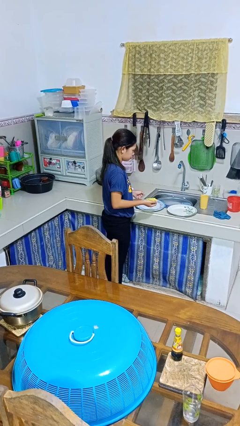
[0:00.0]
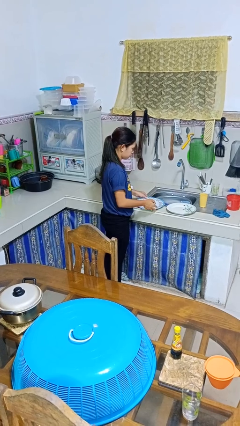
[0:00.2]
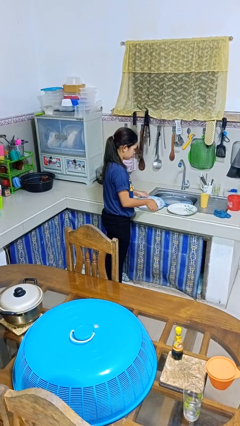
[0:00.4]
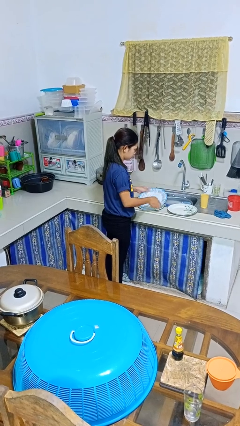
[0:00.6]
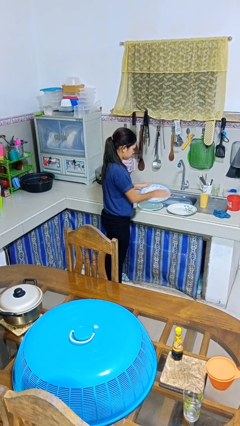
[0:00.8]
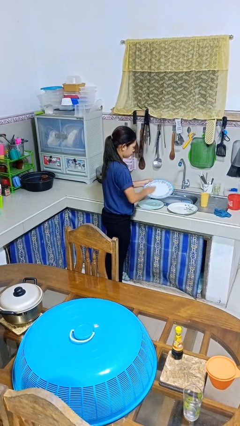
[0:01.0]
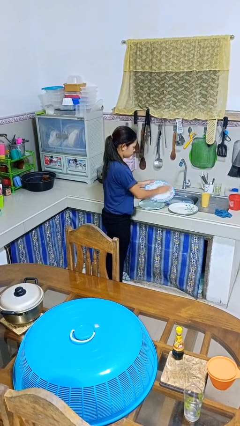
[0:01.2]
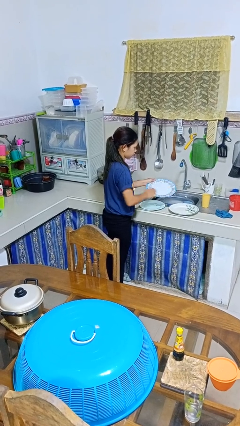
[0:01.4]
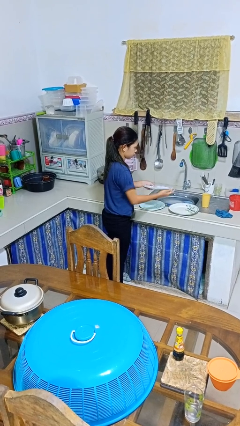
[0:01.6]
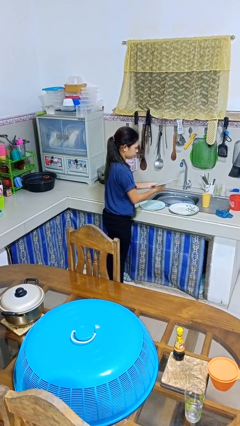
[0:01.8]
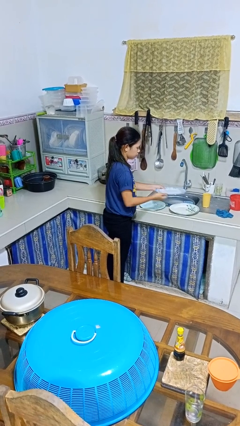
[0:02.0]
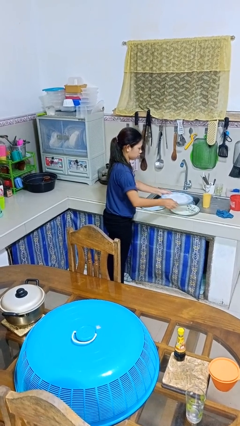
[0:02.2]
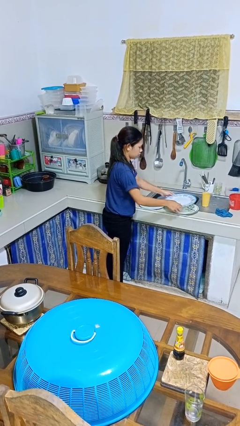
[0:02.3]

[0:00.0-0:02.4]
person washes dish

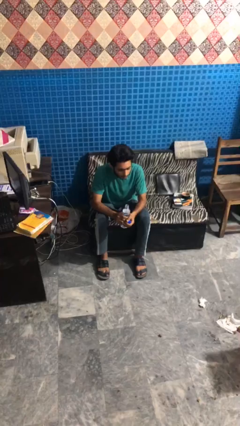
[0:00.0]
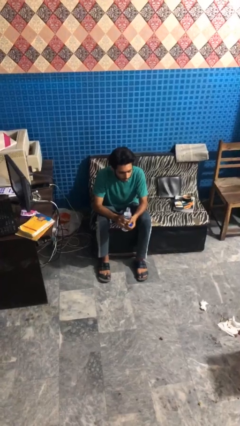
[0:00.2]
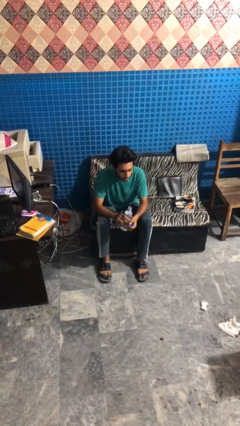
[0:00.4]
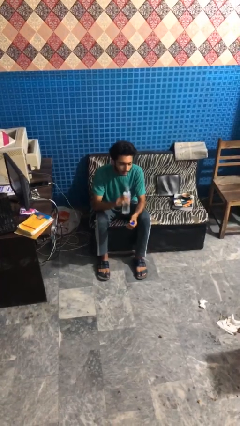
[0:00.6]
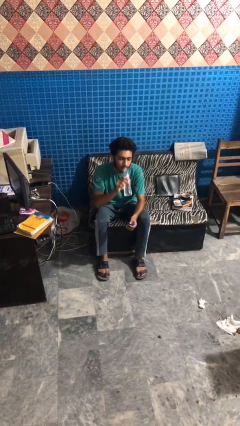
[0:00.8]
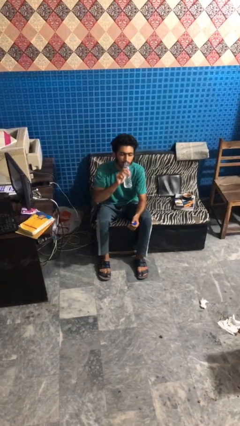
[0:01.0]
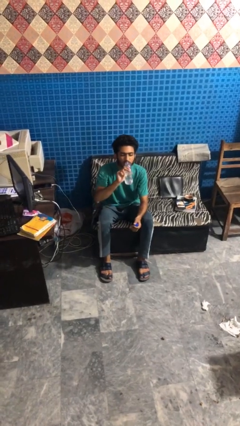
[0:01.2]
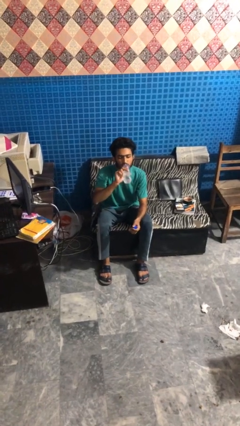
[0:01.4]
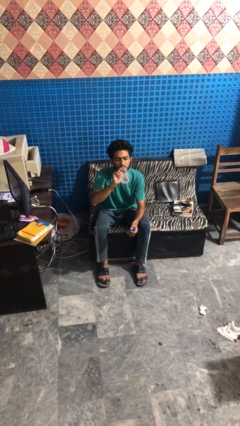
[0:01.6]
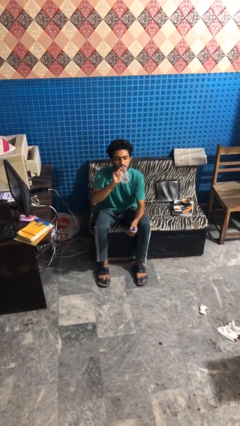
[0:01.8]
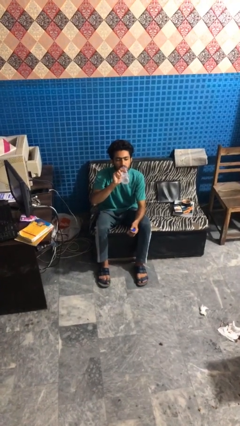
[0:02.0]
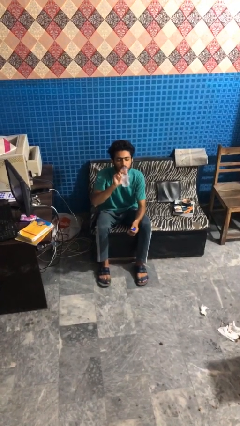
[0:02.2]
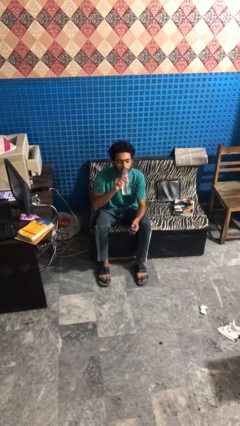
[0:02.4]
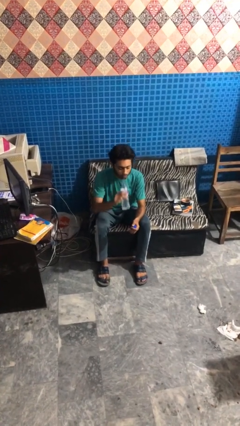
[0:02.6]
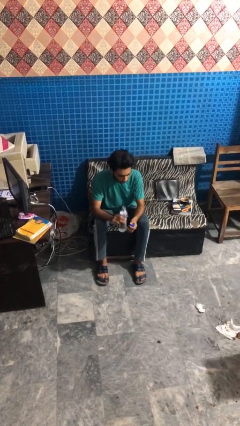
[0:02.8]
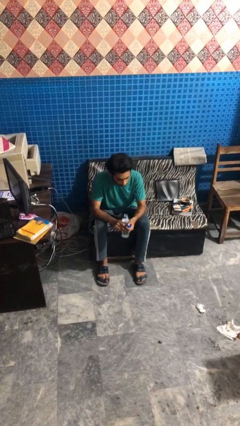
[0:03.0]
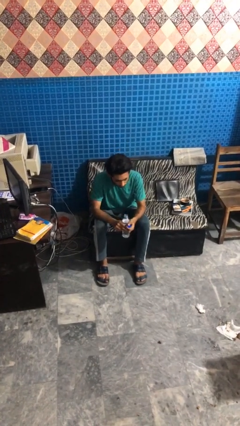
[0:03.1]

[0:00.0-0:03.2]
person drinks from bottle

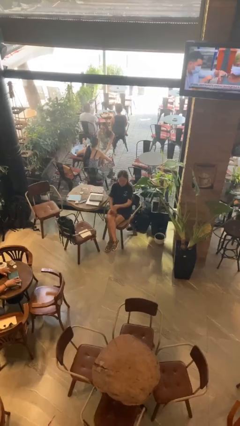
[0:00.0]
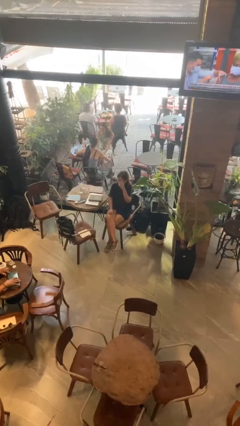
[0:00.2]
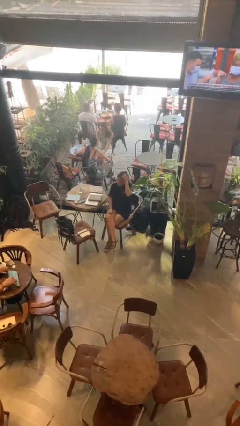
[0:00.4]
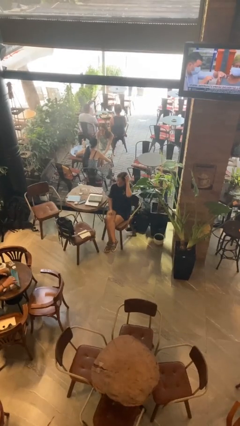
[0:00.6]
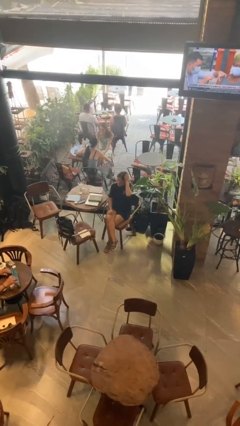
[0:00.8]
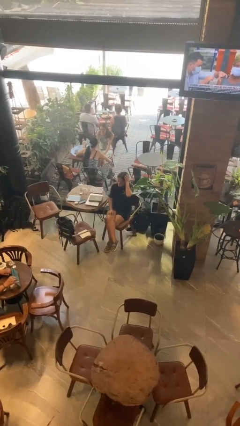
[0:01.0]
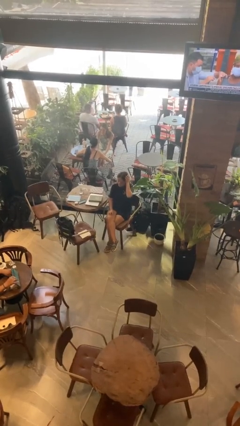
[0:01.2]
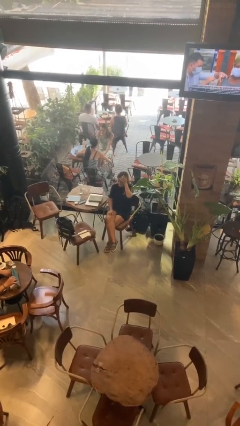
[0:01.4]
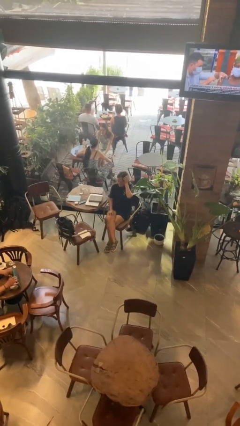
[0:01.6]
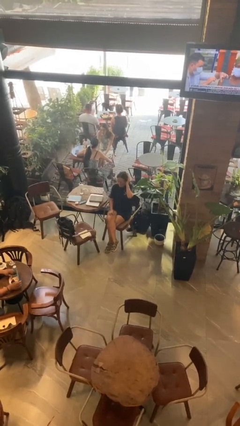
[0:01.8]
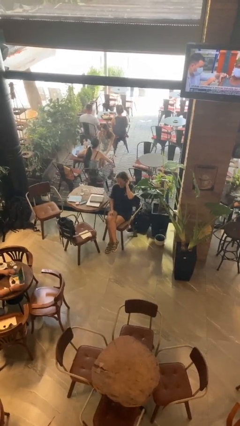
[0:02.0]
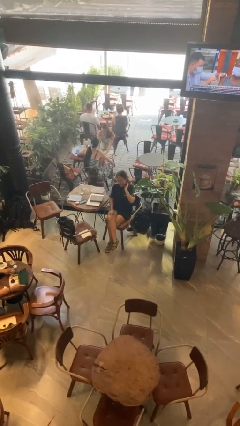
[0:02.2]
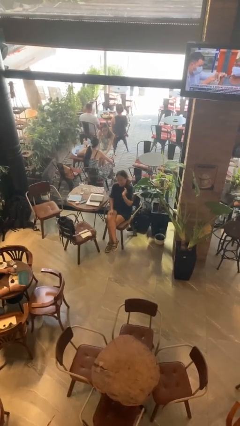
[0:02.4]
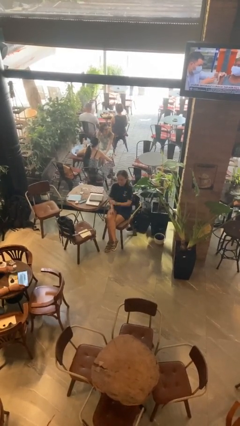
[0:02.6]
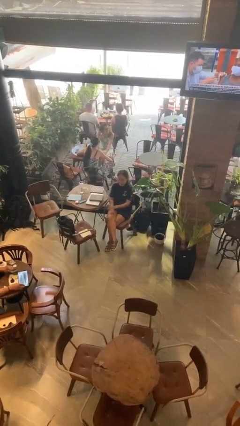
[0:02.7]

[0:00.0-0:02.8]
person scratches face

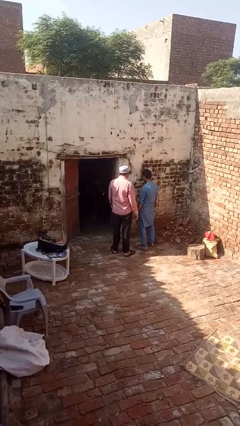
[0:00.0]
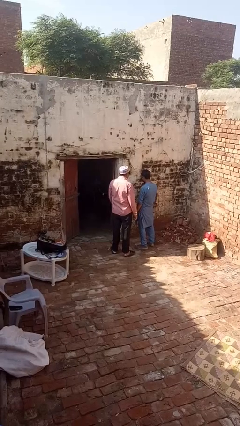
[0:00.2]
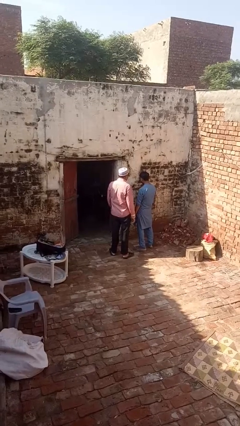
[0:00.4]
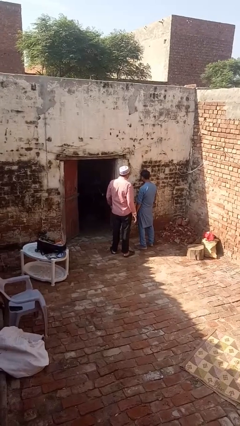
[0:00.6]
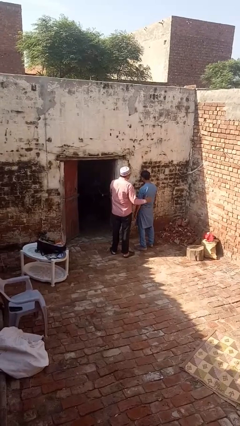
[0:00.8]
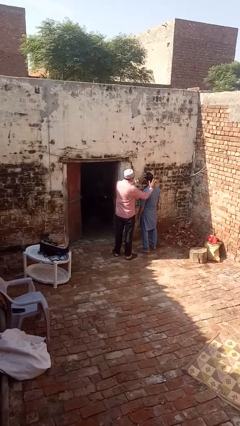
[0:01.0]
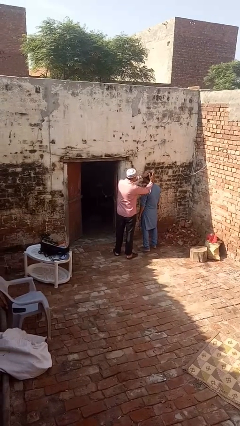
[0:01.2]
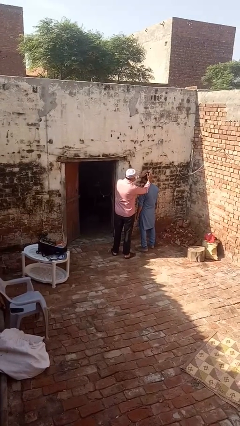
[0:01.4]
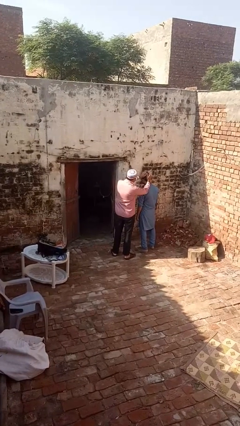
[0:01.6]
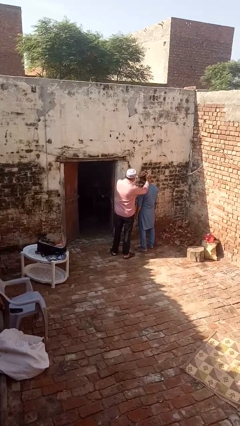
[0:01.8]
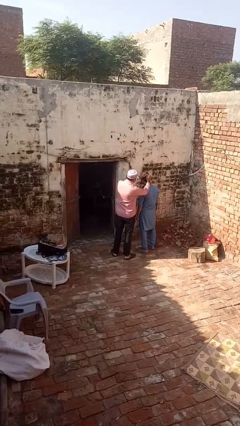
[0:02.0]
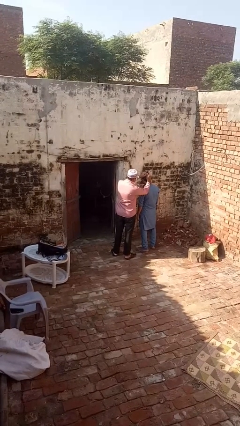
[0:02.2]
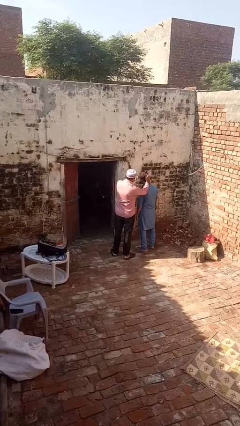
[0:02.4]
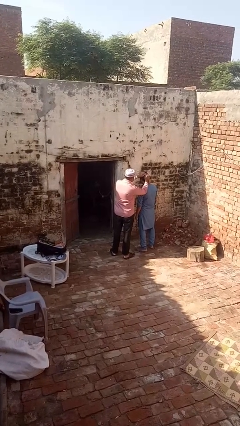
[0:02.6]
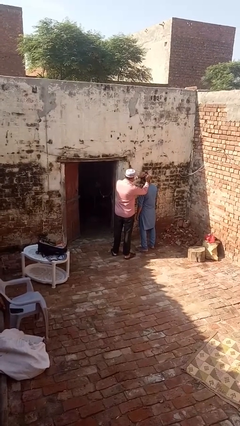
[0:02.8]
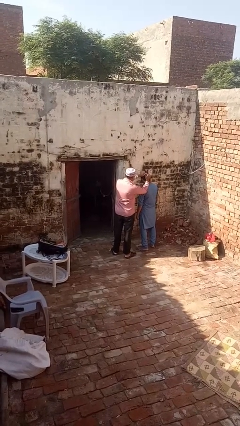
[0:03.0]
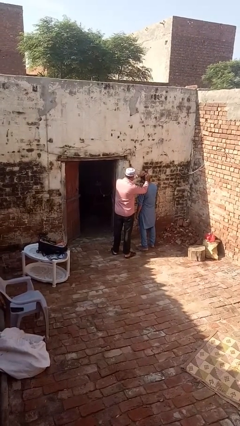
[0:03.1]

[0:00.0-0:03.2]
person grabs person by hair

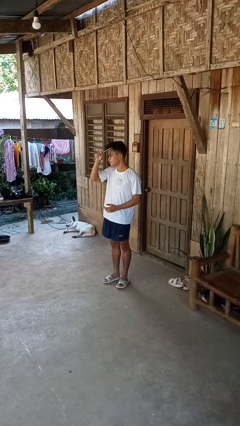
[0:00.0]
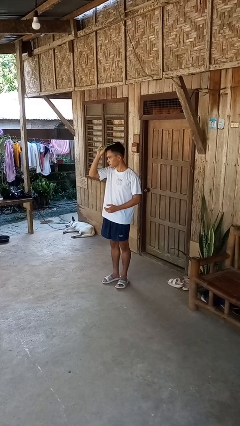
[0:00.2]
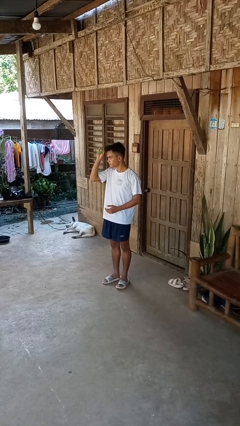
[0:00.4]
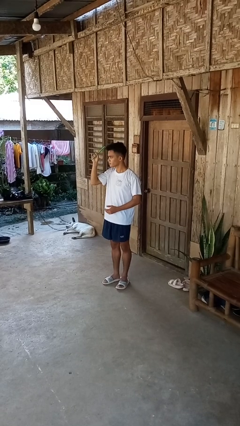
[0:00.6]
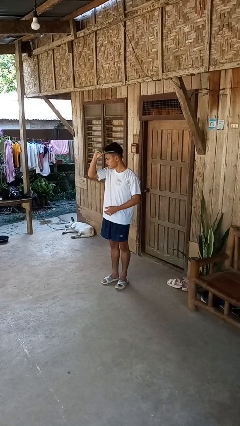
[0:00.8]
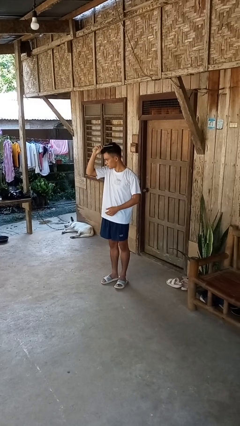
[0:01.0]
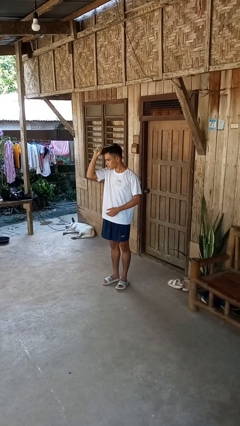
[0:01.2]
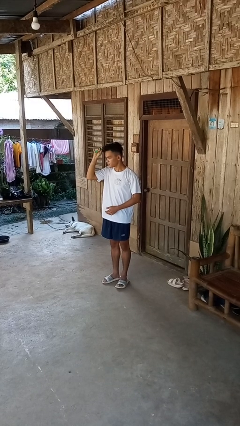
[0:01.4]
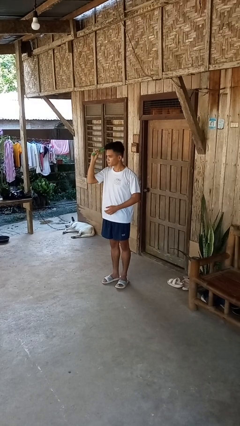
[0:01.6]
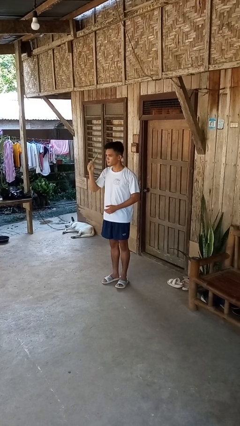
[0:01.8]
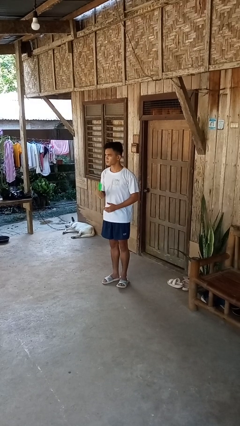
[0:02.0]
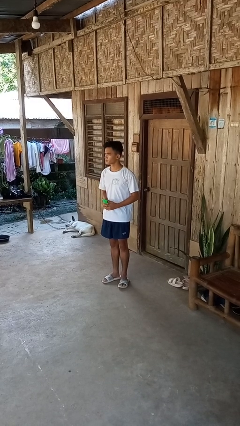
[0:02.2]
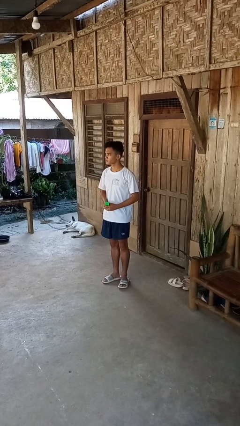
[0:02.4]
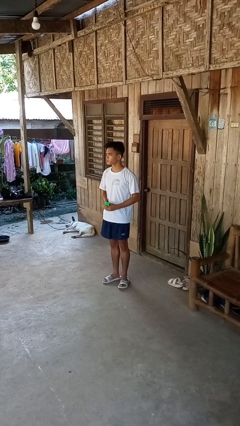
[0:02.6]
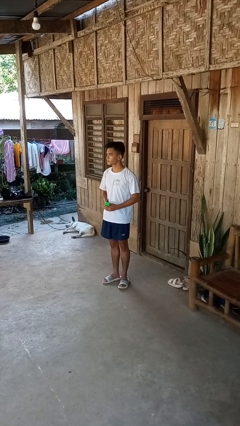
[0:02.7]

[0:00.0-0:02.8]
person brushes hair

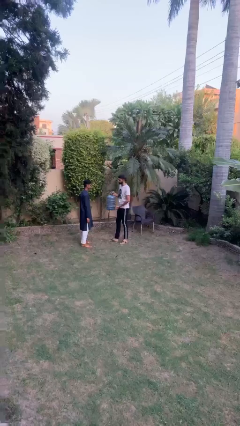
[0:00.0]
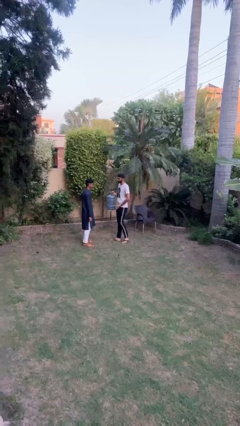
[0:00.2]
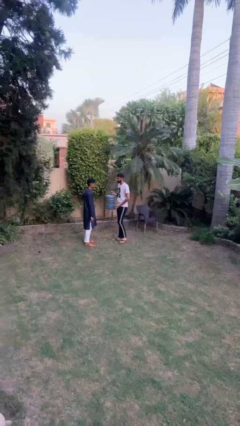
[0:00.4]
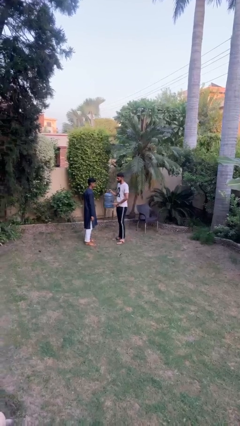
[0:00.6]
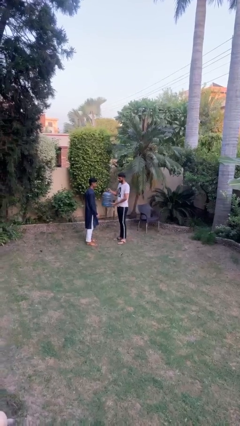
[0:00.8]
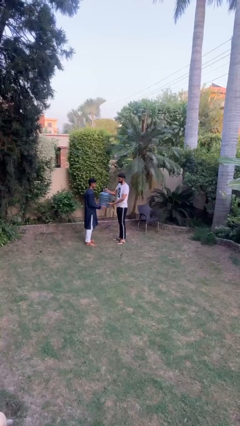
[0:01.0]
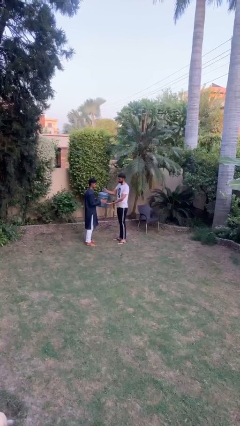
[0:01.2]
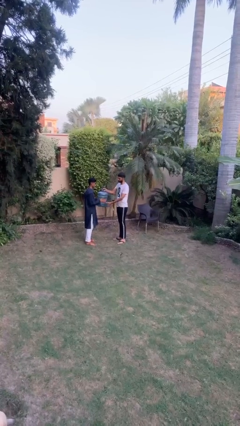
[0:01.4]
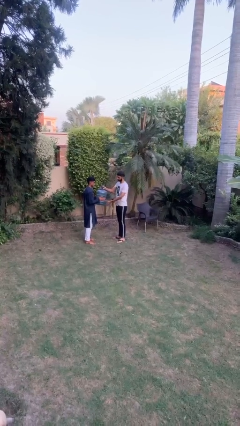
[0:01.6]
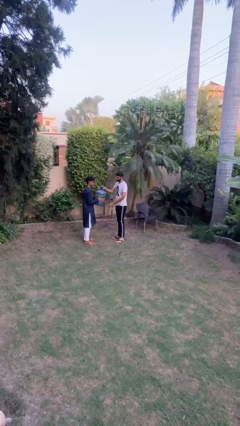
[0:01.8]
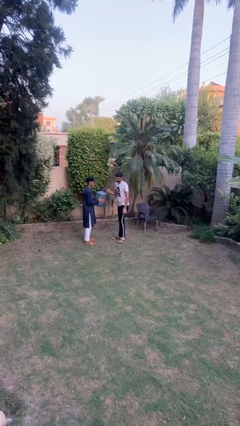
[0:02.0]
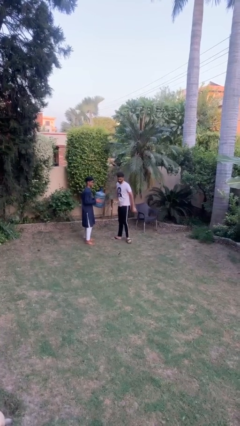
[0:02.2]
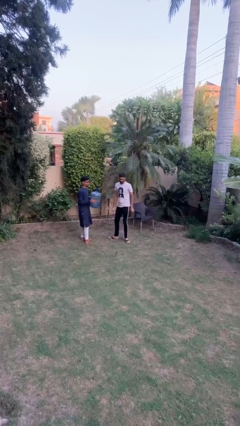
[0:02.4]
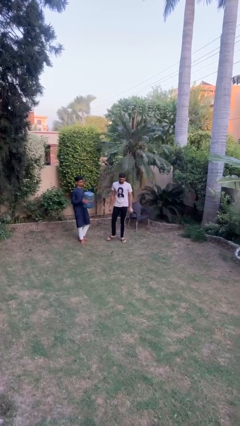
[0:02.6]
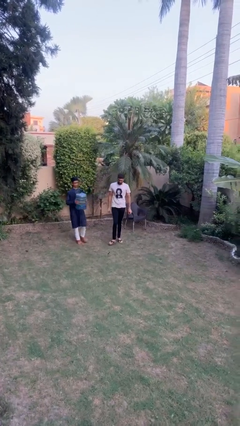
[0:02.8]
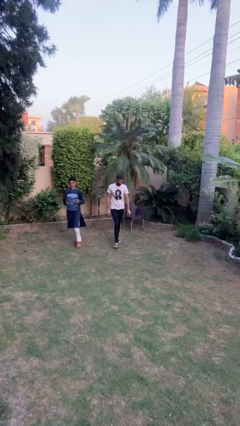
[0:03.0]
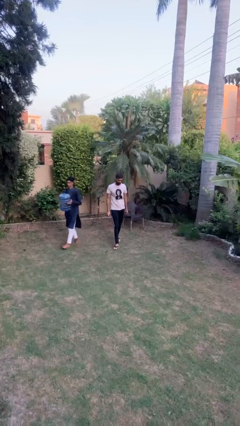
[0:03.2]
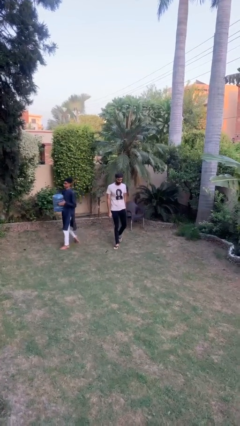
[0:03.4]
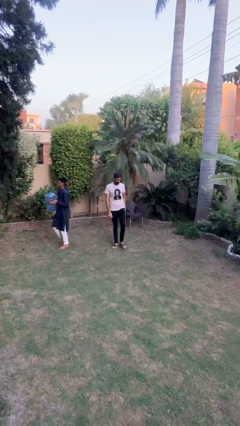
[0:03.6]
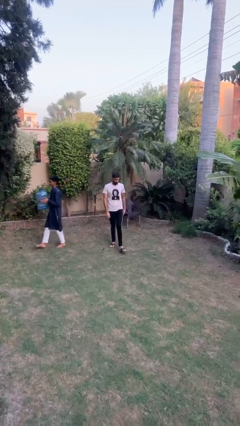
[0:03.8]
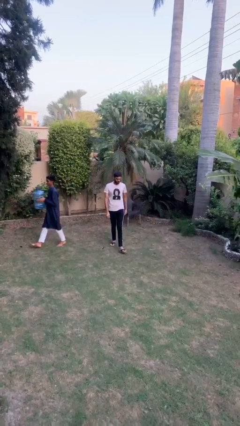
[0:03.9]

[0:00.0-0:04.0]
person transfers object to person
